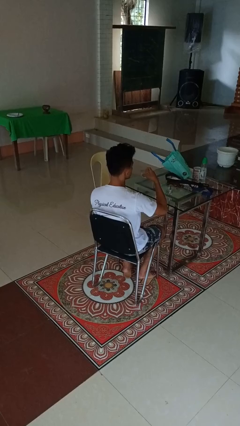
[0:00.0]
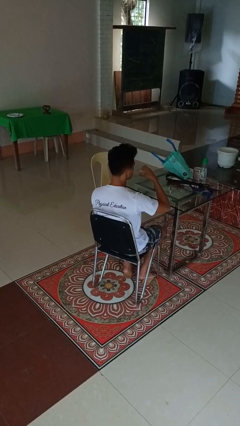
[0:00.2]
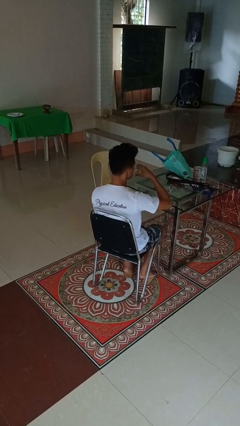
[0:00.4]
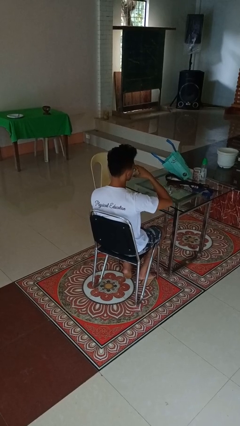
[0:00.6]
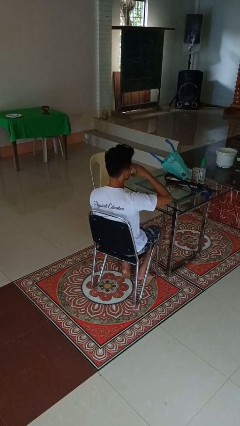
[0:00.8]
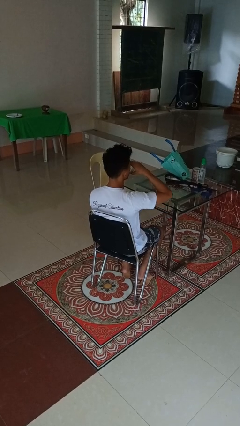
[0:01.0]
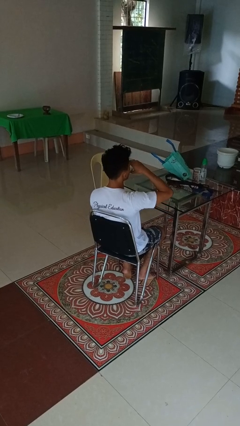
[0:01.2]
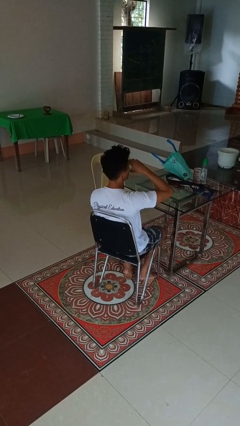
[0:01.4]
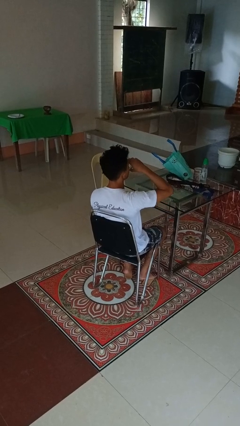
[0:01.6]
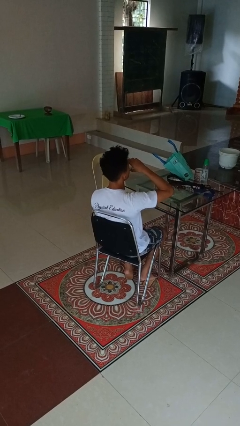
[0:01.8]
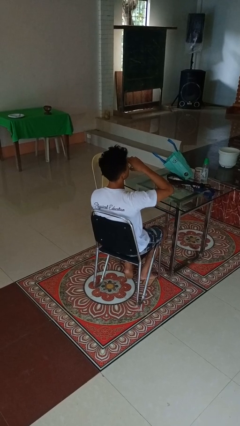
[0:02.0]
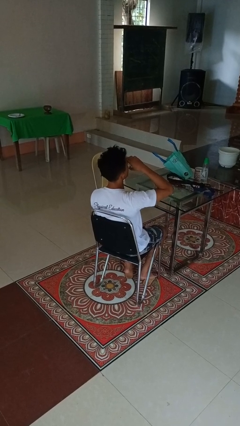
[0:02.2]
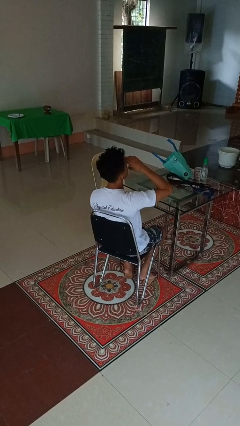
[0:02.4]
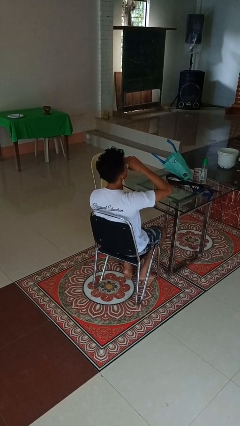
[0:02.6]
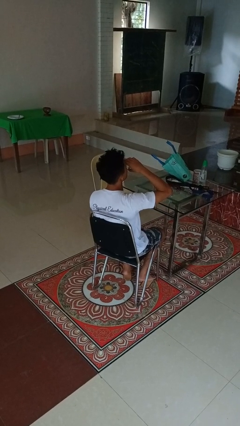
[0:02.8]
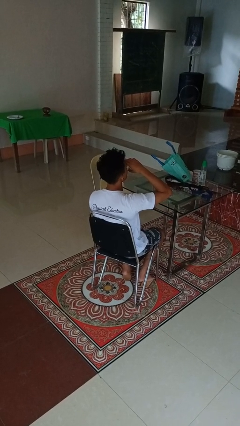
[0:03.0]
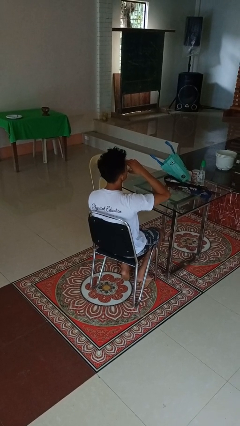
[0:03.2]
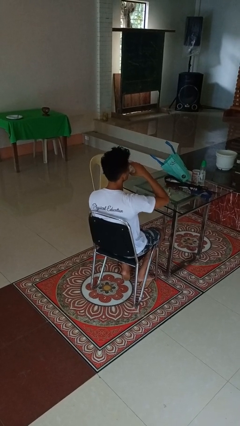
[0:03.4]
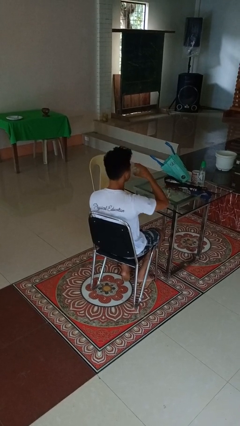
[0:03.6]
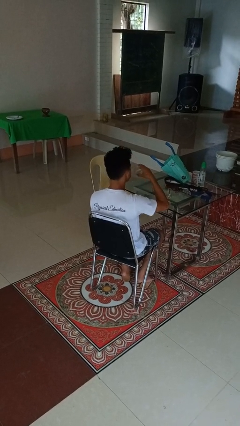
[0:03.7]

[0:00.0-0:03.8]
person drinks from shotglass

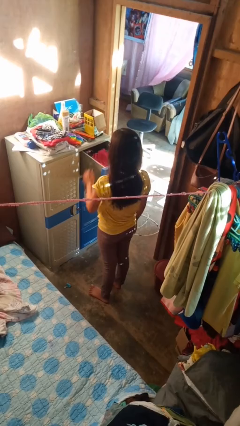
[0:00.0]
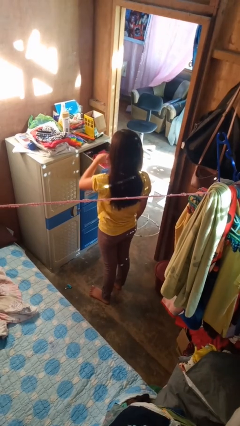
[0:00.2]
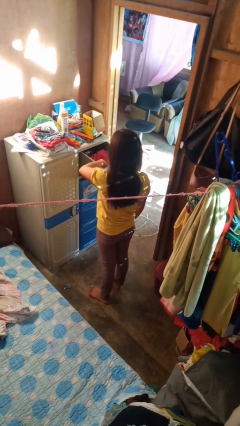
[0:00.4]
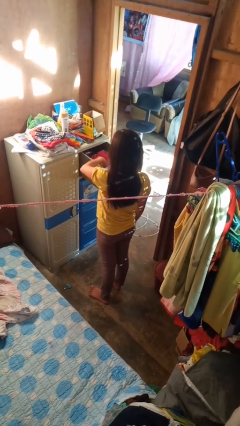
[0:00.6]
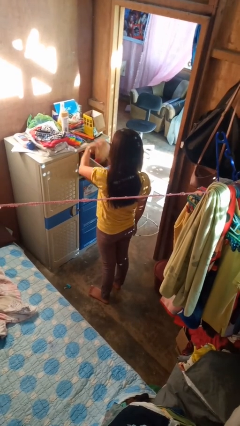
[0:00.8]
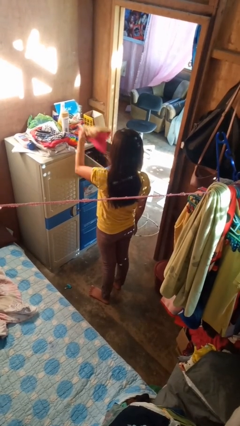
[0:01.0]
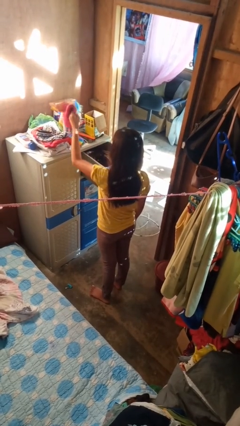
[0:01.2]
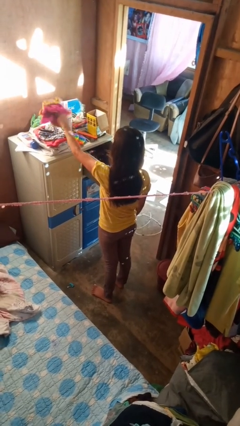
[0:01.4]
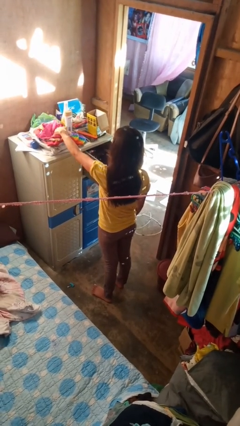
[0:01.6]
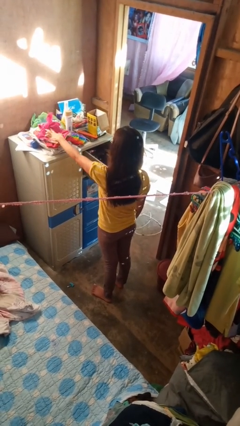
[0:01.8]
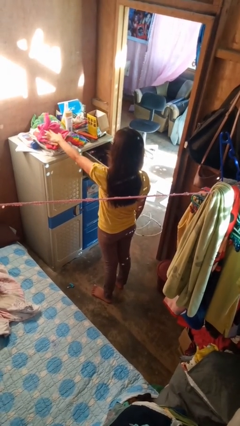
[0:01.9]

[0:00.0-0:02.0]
person takes clothes from dresser

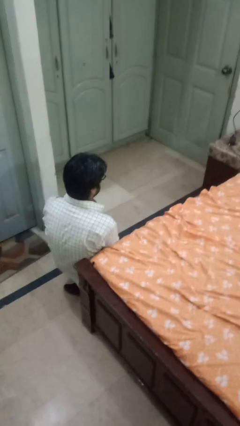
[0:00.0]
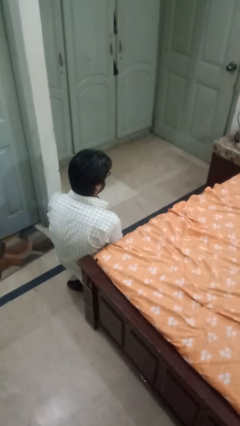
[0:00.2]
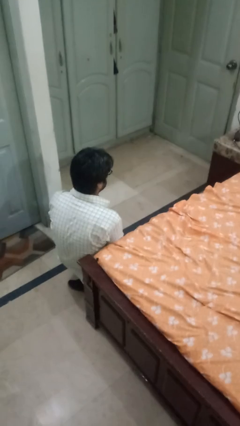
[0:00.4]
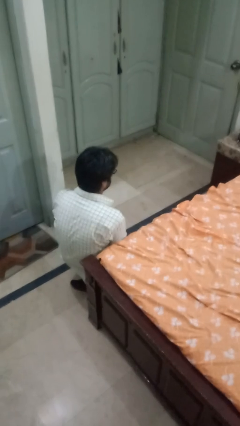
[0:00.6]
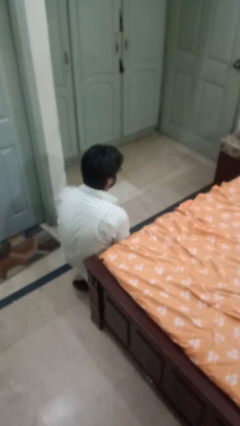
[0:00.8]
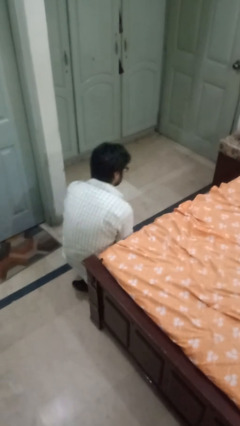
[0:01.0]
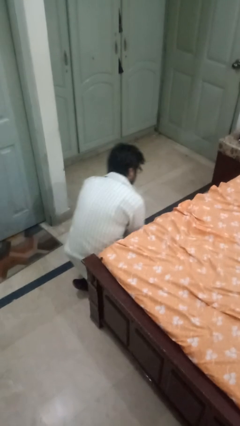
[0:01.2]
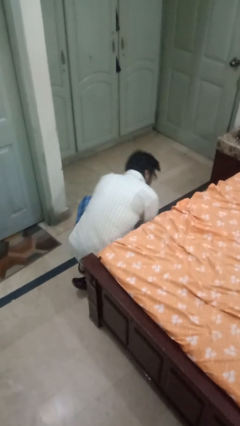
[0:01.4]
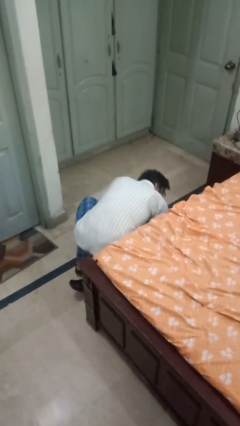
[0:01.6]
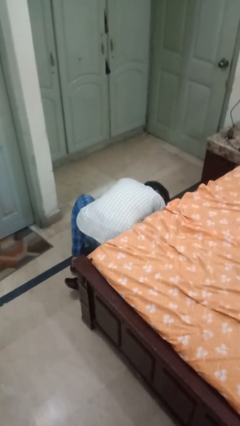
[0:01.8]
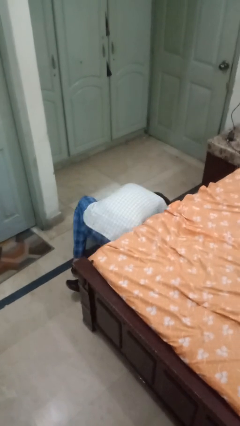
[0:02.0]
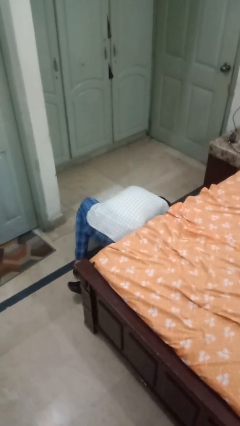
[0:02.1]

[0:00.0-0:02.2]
person lies down on bed

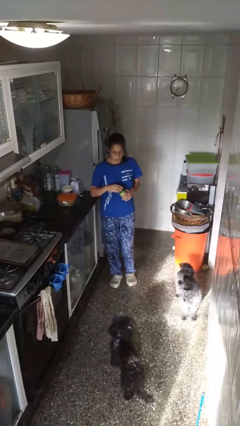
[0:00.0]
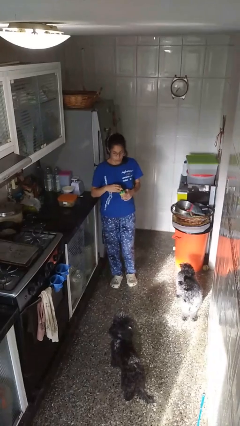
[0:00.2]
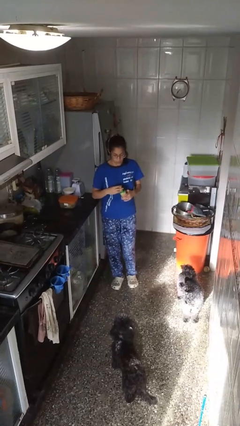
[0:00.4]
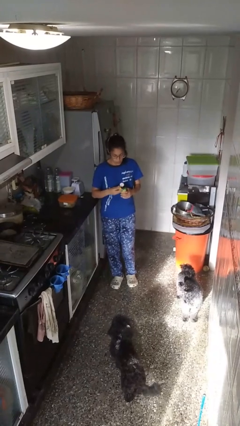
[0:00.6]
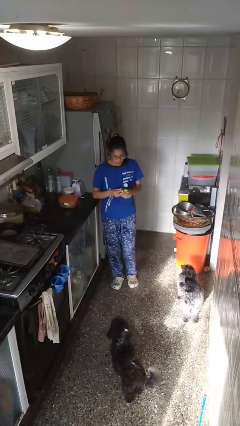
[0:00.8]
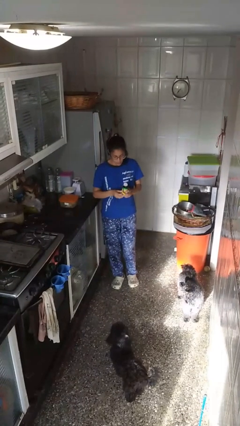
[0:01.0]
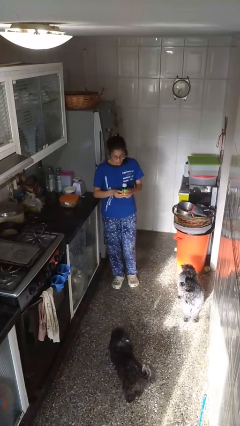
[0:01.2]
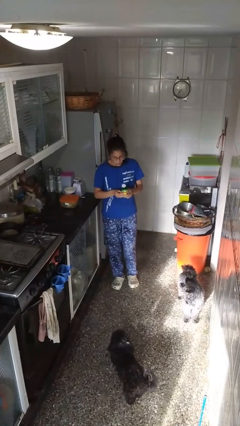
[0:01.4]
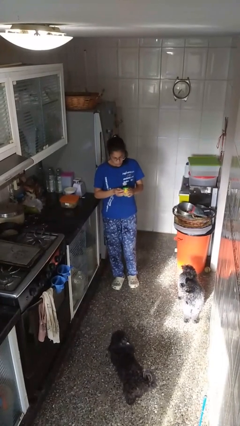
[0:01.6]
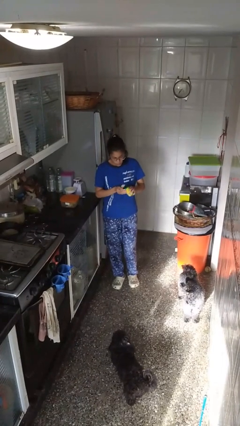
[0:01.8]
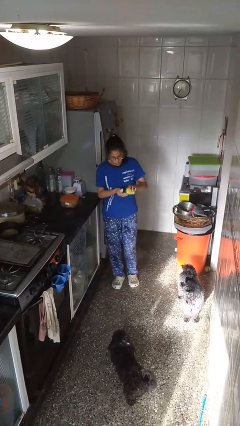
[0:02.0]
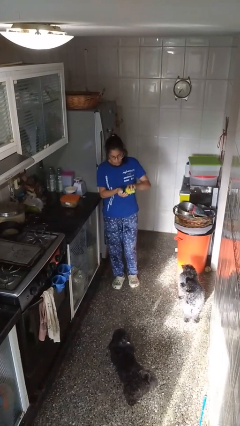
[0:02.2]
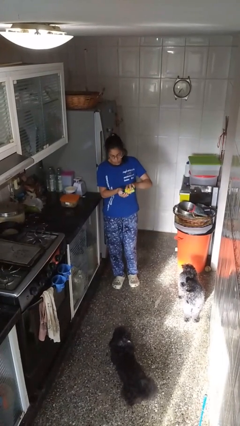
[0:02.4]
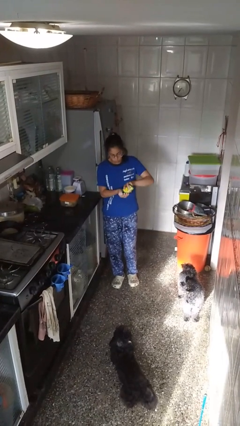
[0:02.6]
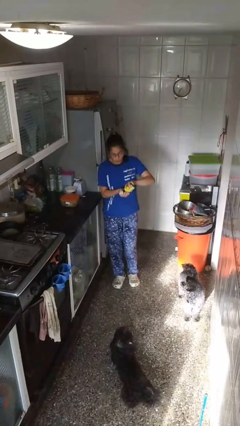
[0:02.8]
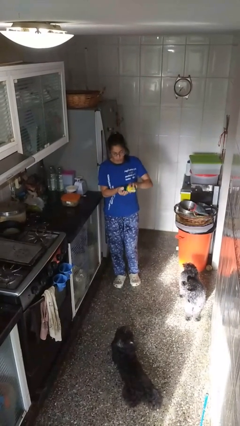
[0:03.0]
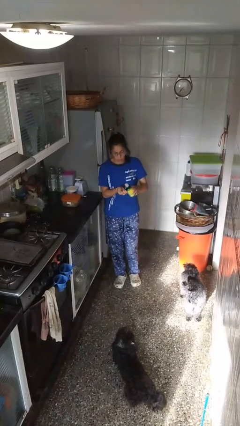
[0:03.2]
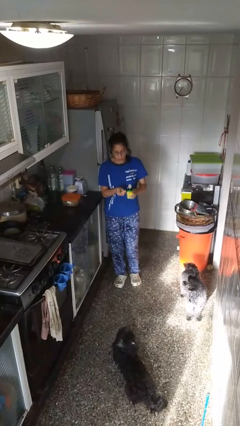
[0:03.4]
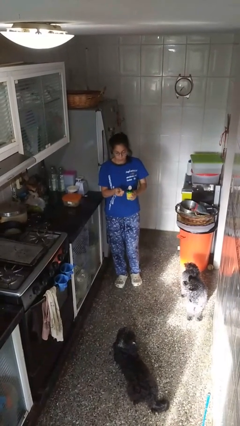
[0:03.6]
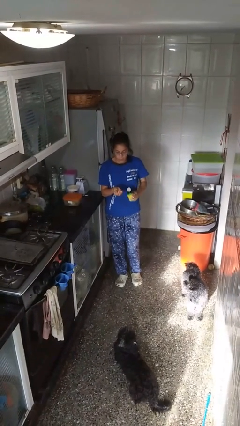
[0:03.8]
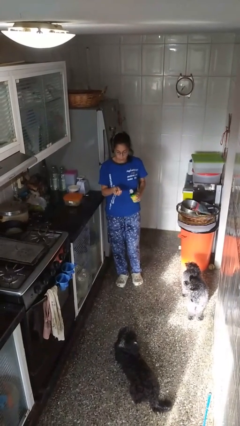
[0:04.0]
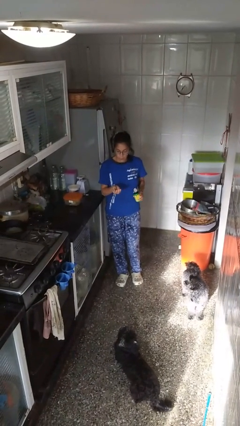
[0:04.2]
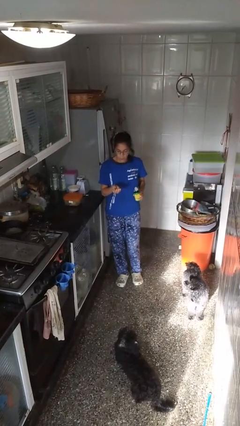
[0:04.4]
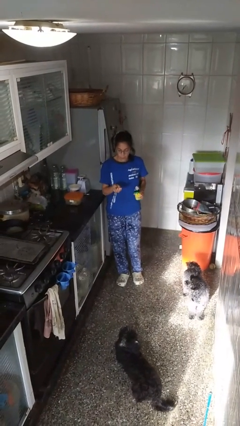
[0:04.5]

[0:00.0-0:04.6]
person takes medicine pills

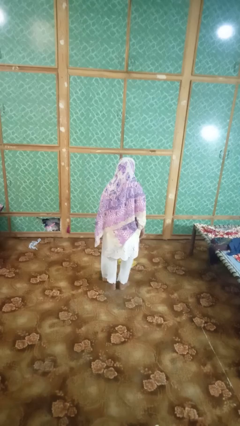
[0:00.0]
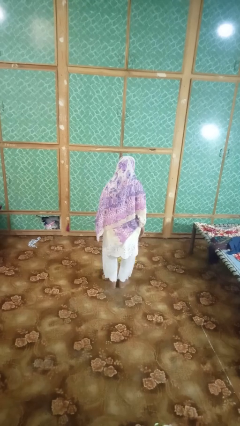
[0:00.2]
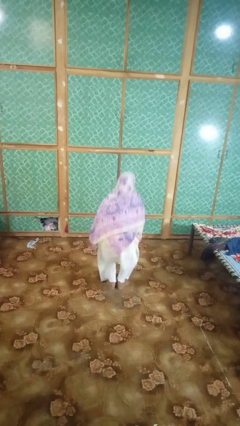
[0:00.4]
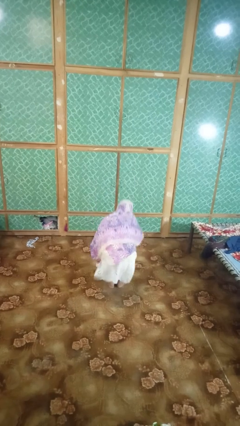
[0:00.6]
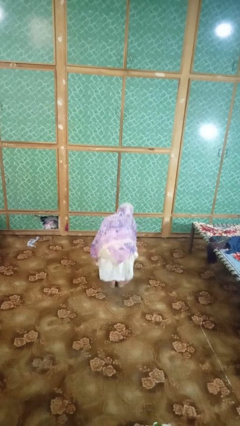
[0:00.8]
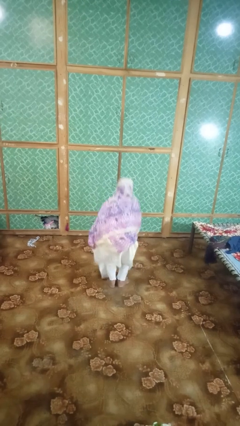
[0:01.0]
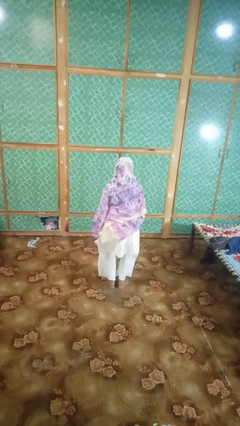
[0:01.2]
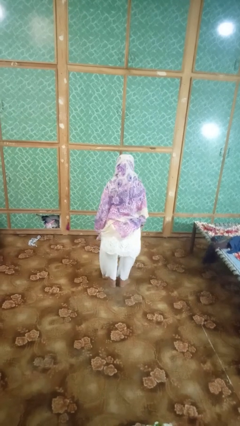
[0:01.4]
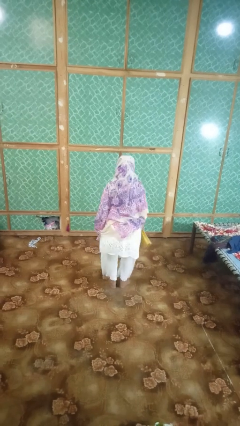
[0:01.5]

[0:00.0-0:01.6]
person picks up object from floor

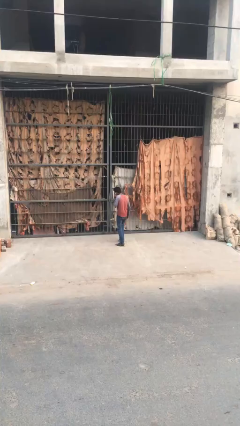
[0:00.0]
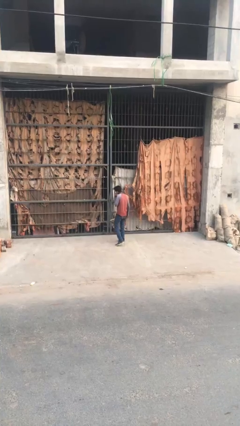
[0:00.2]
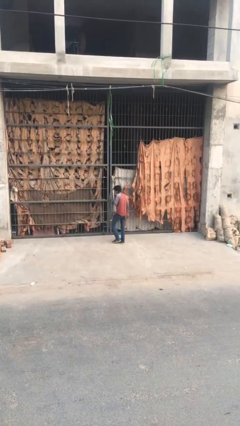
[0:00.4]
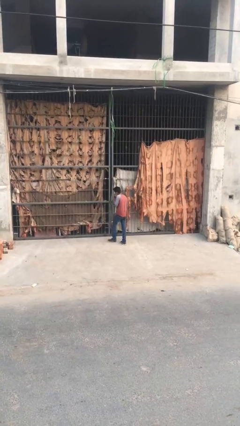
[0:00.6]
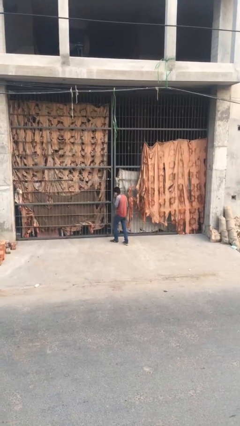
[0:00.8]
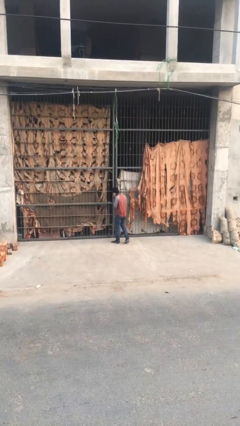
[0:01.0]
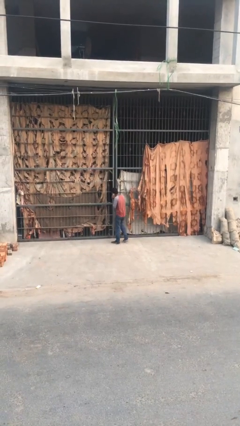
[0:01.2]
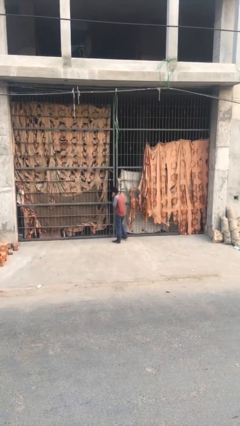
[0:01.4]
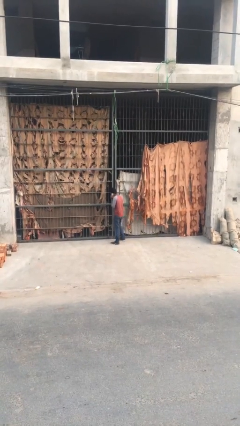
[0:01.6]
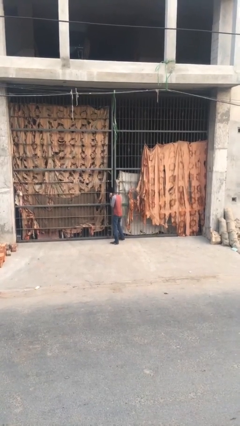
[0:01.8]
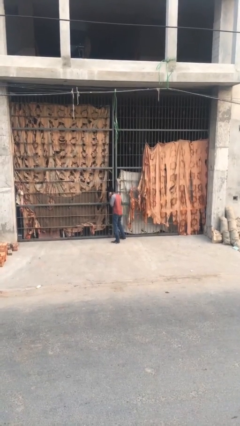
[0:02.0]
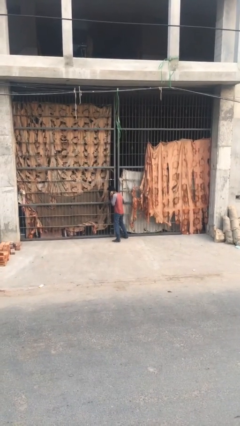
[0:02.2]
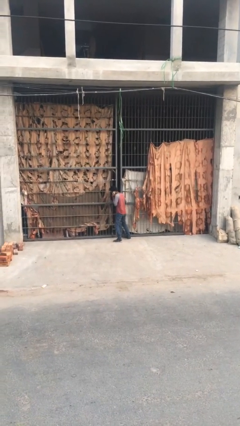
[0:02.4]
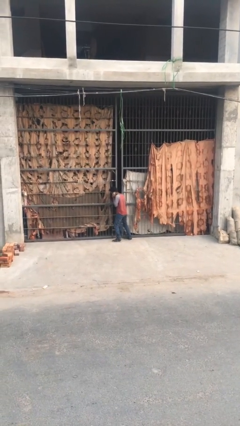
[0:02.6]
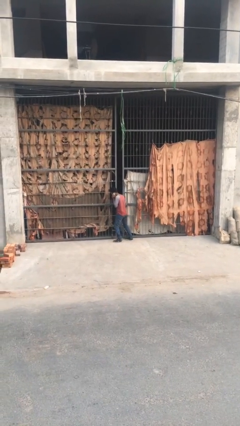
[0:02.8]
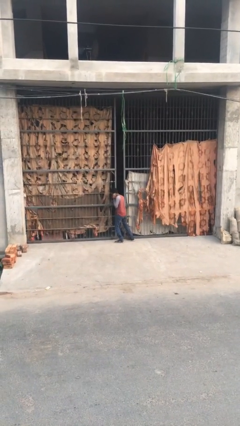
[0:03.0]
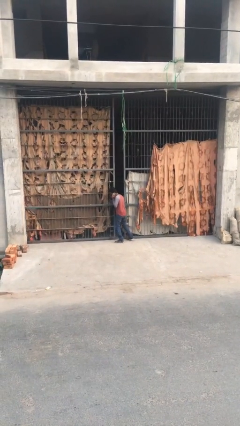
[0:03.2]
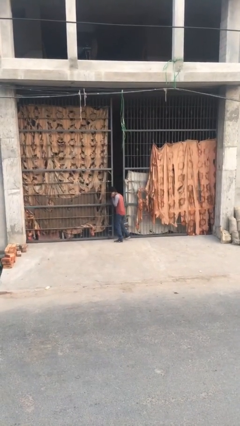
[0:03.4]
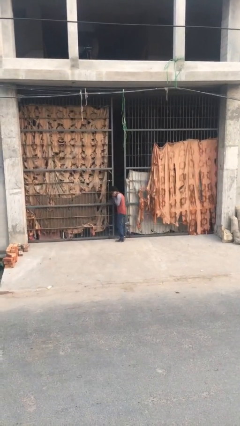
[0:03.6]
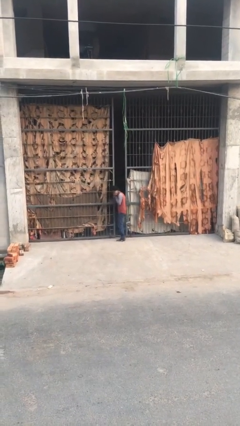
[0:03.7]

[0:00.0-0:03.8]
person opens facility door
